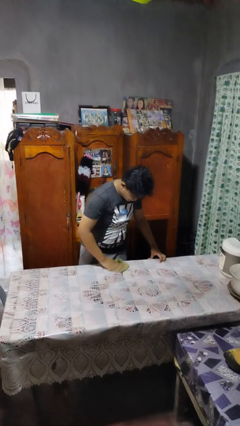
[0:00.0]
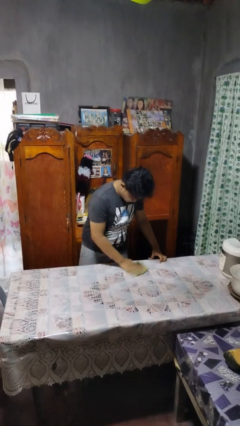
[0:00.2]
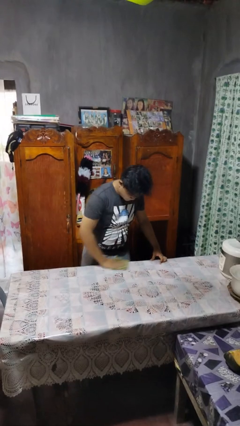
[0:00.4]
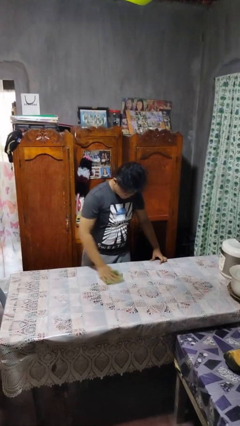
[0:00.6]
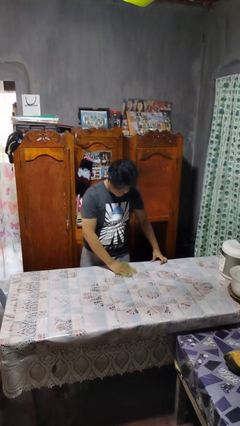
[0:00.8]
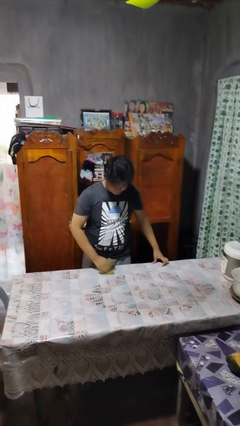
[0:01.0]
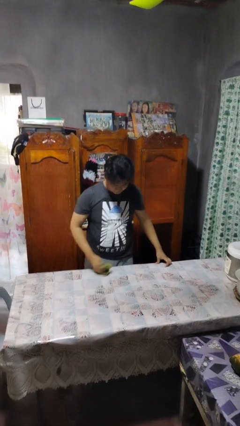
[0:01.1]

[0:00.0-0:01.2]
person cleans table with rag

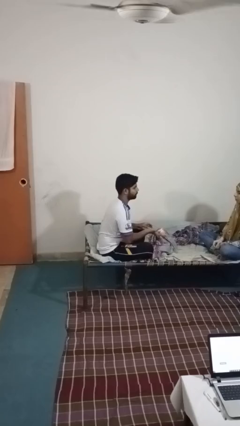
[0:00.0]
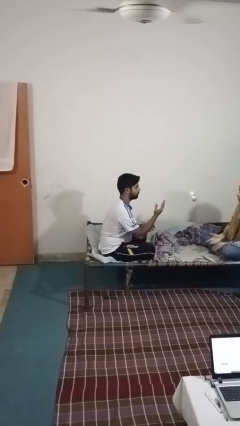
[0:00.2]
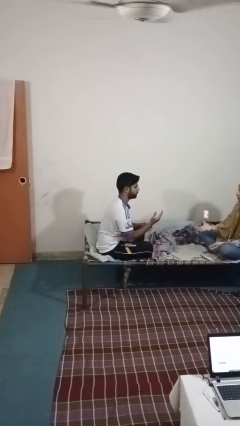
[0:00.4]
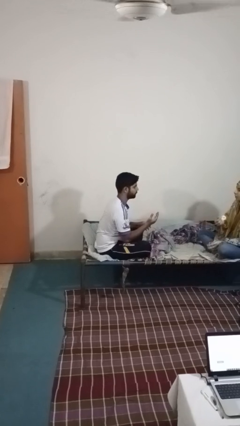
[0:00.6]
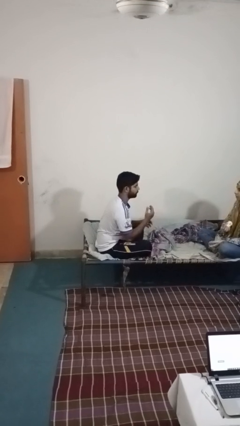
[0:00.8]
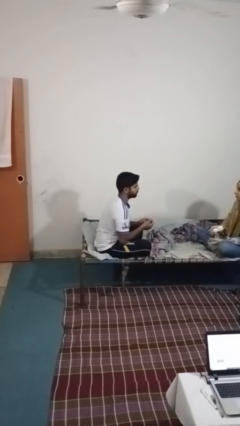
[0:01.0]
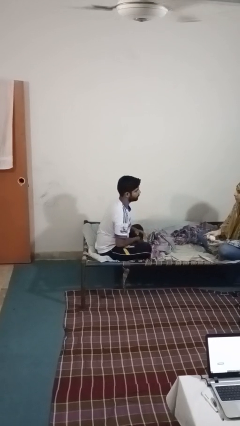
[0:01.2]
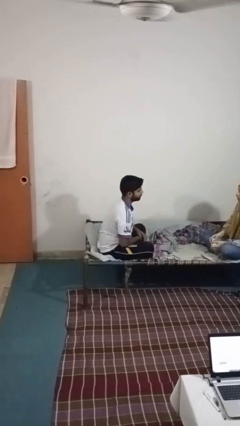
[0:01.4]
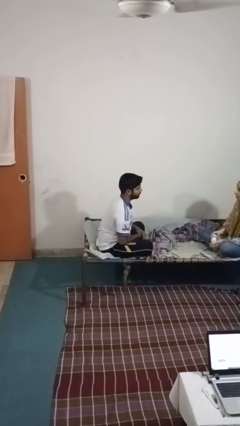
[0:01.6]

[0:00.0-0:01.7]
person throws object to person

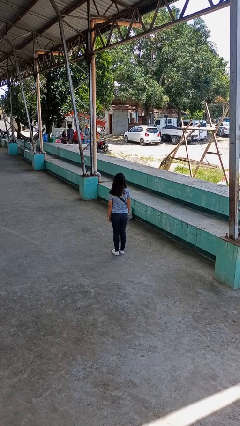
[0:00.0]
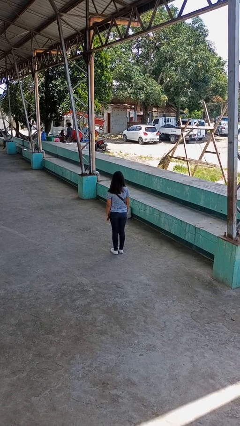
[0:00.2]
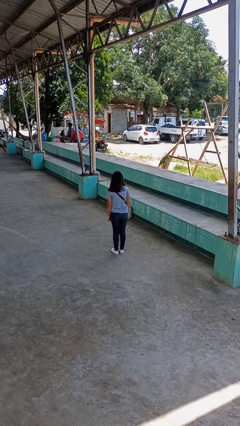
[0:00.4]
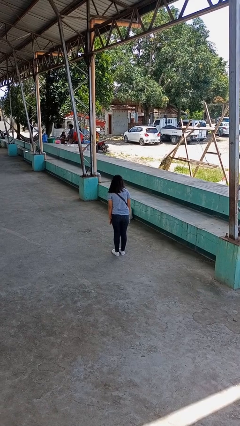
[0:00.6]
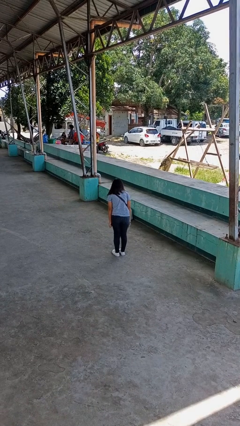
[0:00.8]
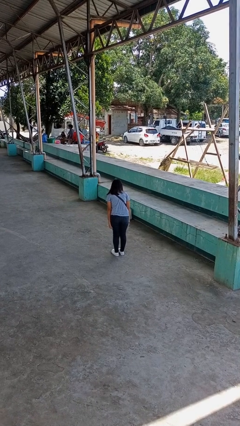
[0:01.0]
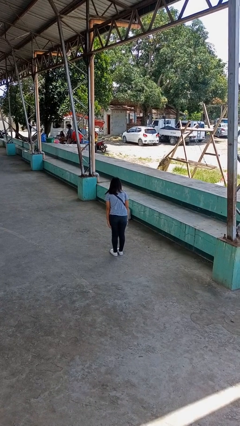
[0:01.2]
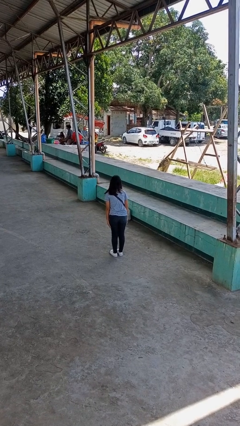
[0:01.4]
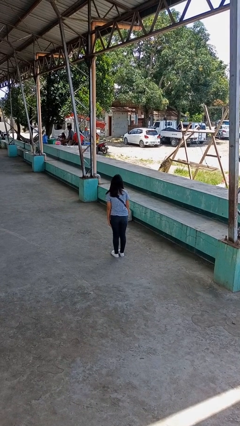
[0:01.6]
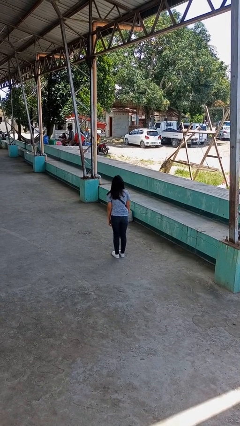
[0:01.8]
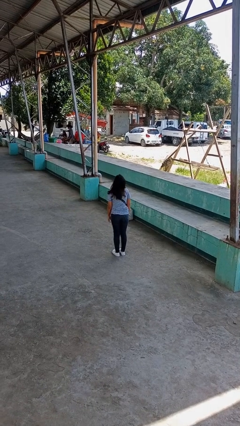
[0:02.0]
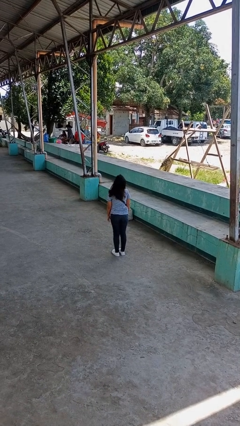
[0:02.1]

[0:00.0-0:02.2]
person bows

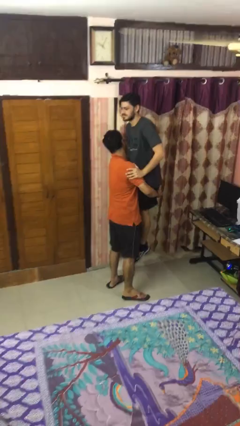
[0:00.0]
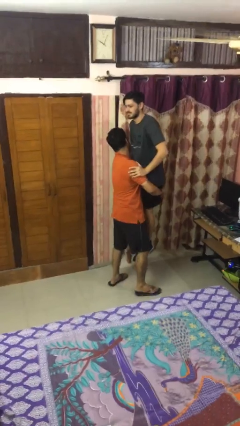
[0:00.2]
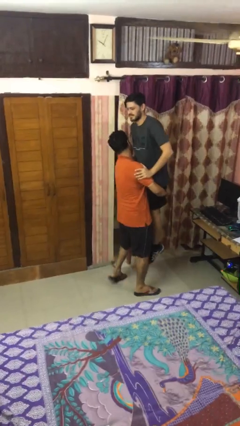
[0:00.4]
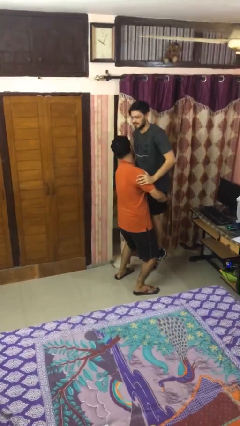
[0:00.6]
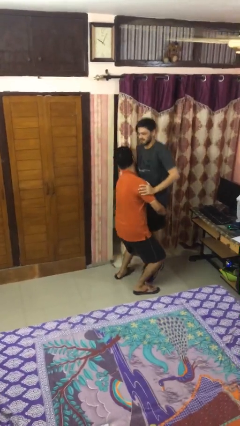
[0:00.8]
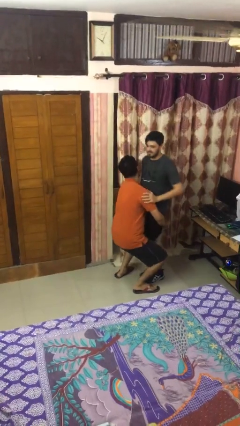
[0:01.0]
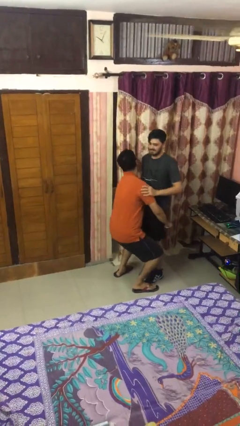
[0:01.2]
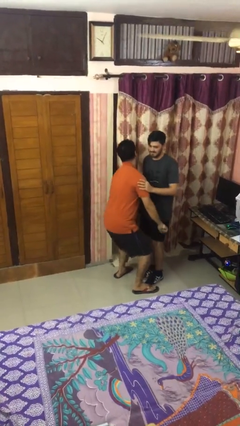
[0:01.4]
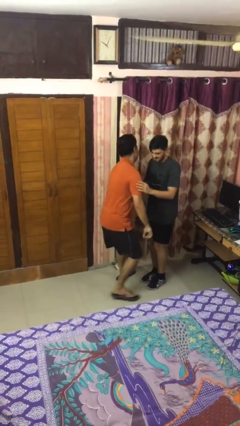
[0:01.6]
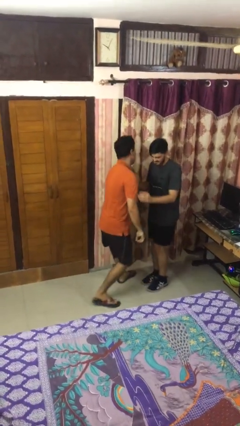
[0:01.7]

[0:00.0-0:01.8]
person puts down person

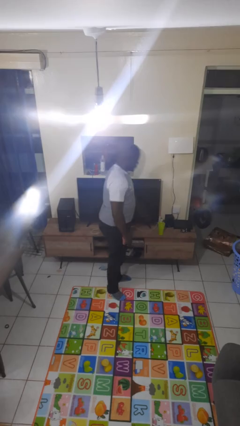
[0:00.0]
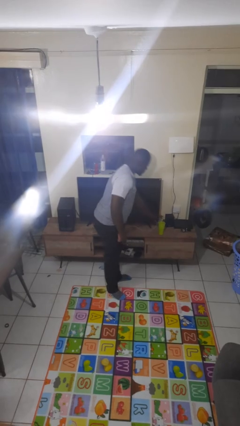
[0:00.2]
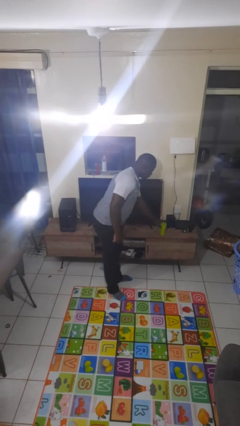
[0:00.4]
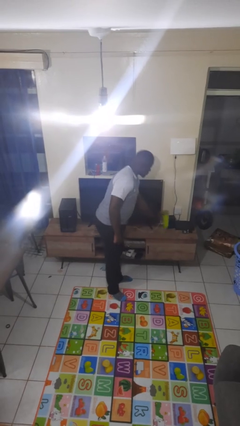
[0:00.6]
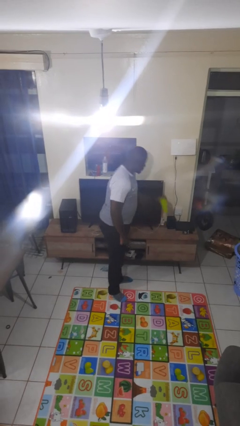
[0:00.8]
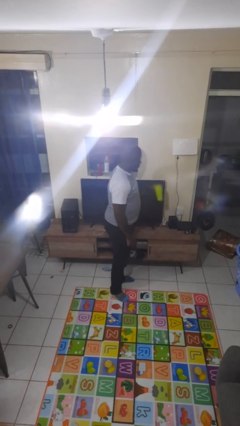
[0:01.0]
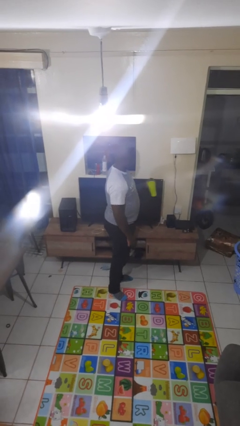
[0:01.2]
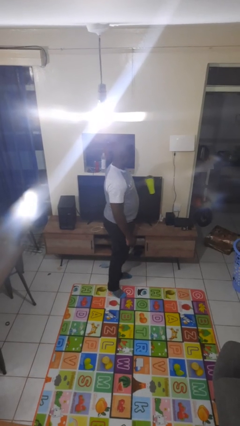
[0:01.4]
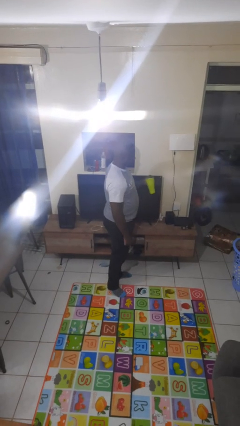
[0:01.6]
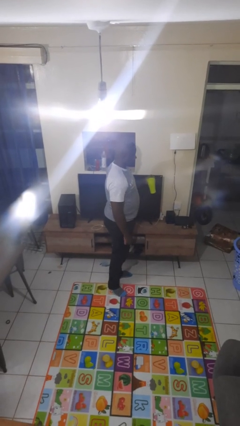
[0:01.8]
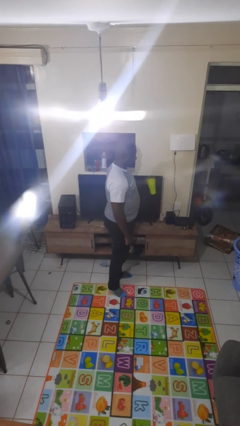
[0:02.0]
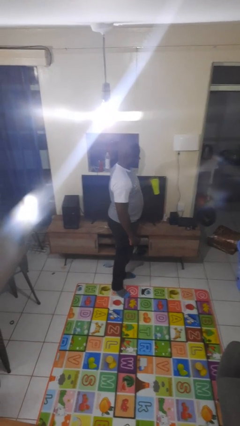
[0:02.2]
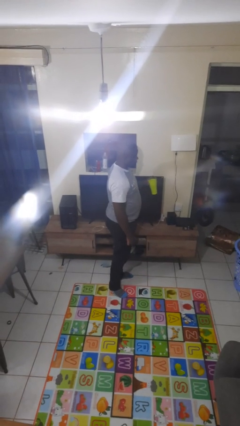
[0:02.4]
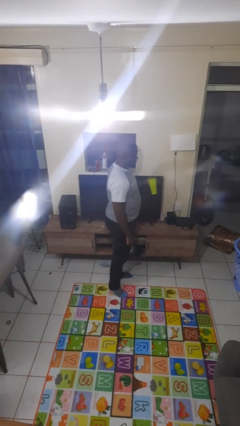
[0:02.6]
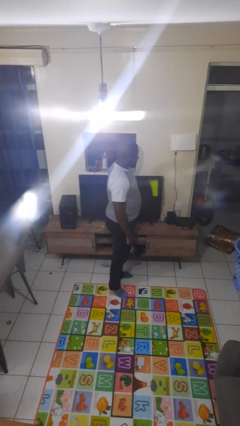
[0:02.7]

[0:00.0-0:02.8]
person picks up object from countertop

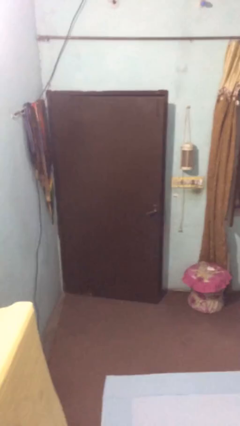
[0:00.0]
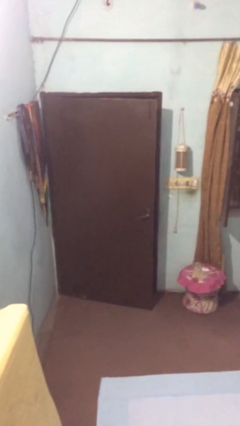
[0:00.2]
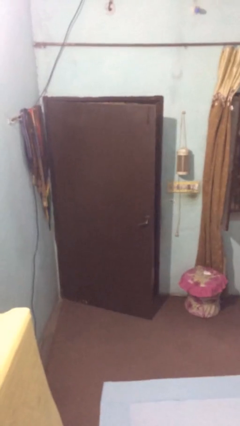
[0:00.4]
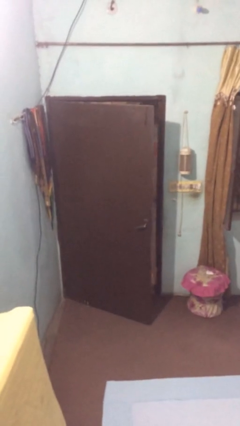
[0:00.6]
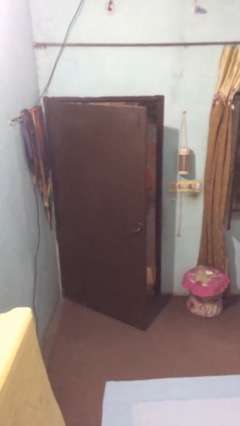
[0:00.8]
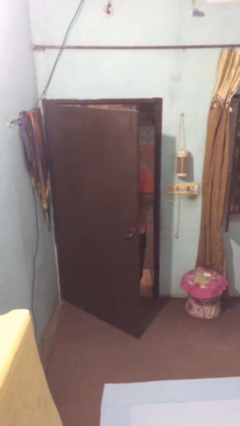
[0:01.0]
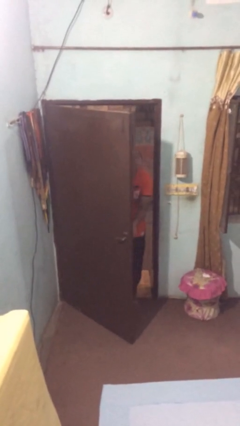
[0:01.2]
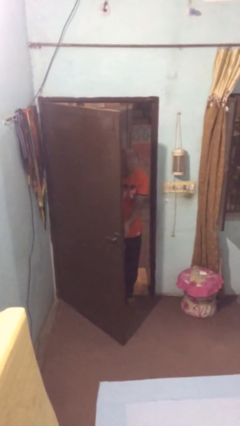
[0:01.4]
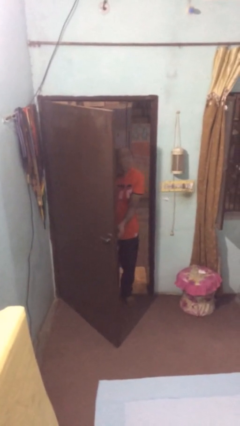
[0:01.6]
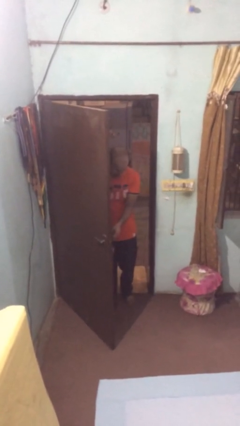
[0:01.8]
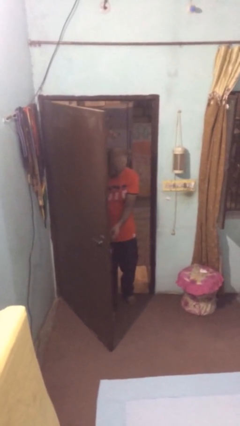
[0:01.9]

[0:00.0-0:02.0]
person opens facility door

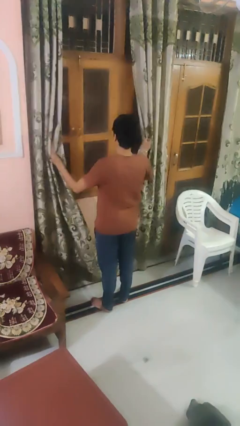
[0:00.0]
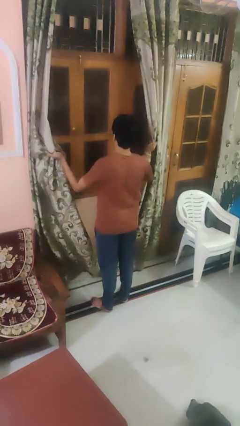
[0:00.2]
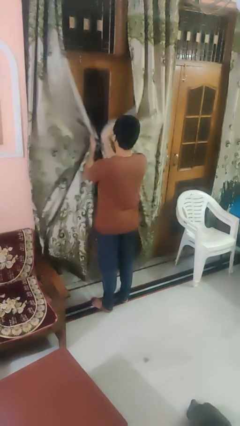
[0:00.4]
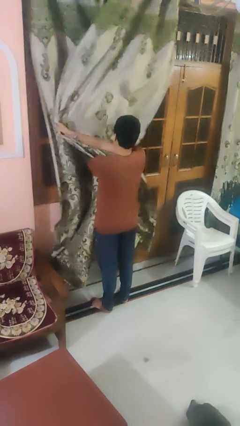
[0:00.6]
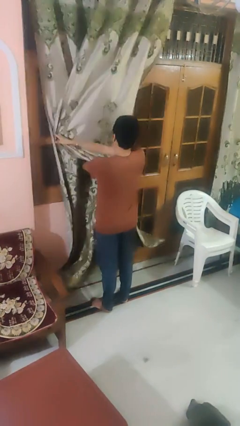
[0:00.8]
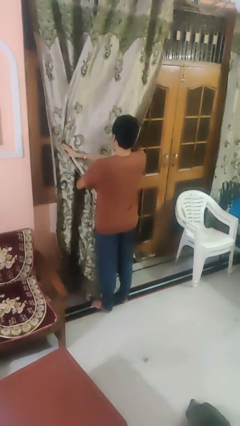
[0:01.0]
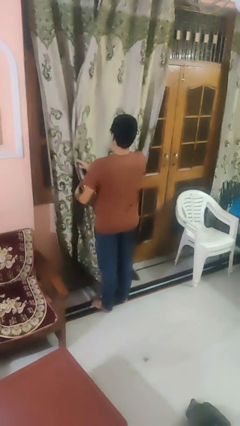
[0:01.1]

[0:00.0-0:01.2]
person closes curtains

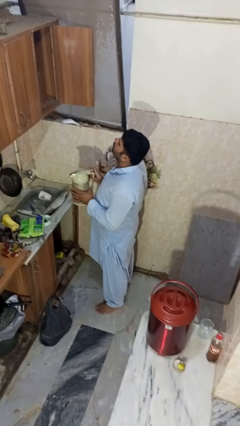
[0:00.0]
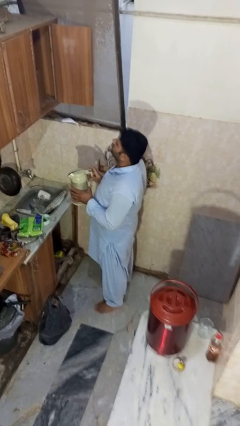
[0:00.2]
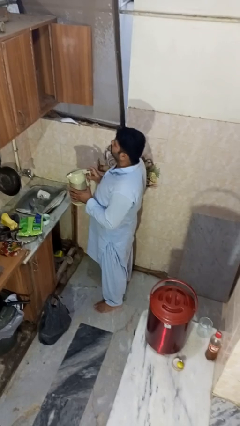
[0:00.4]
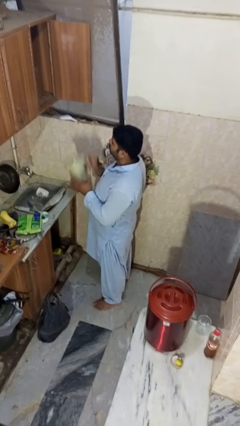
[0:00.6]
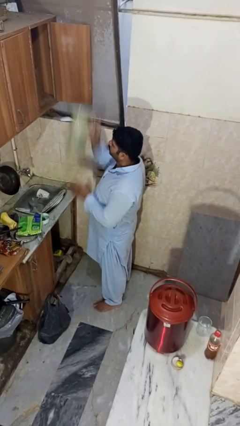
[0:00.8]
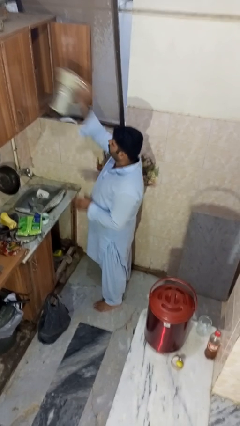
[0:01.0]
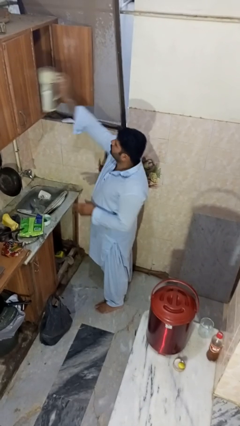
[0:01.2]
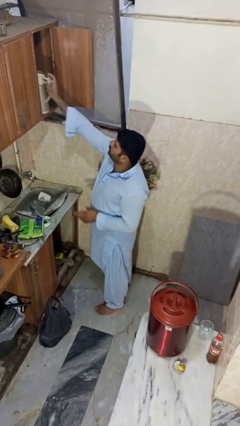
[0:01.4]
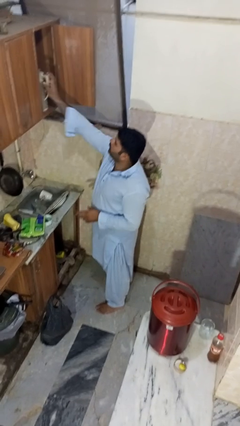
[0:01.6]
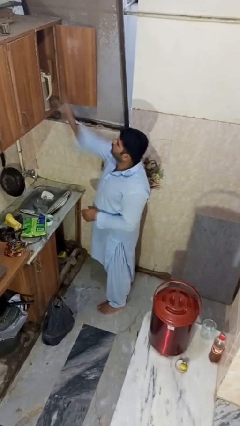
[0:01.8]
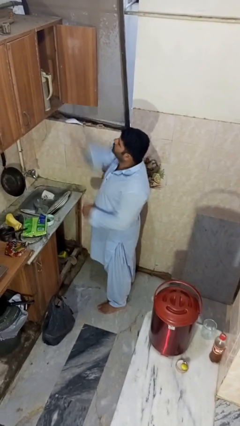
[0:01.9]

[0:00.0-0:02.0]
person puts object in cabinet

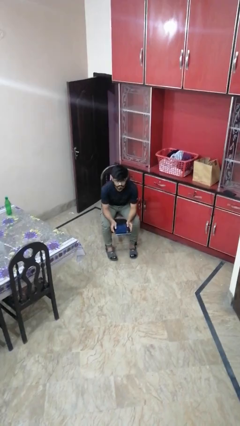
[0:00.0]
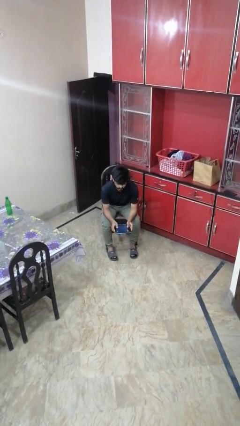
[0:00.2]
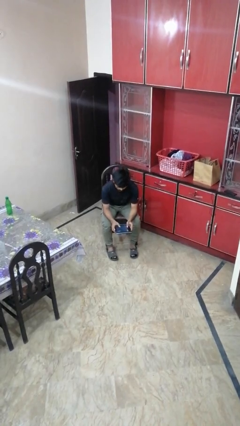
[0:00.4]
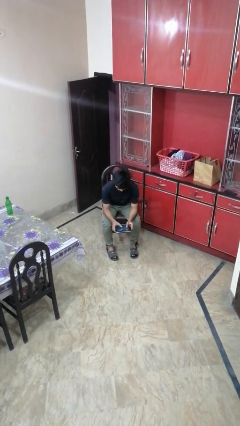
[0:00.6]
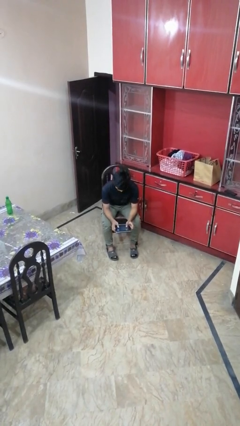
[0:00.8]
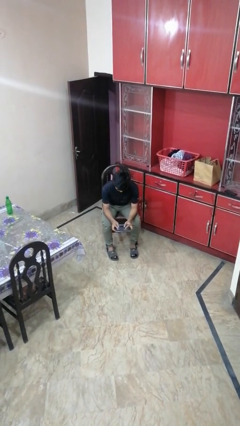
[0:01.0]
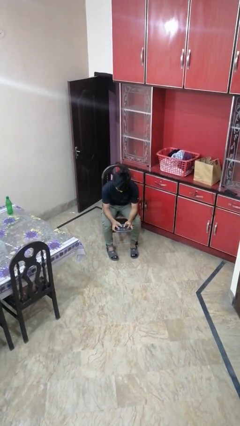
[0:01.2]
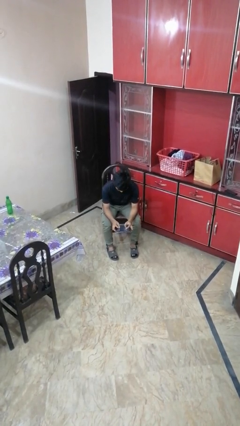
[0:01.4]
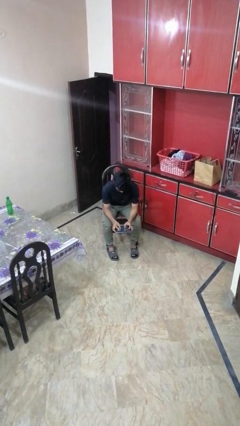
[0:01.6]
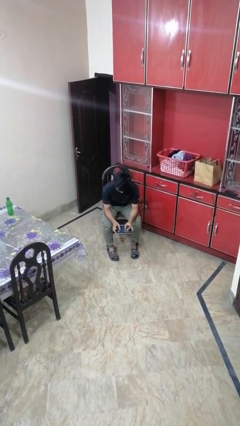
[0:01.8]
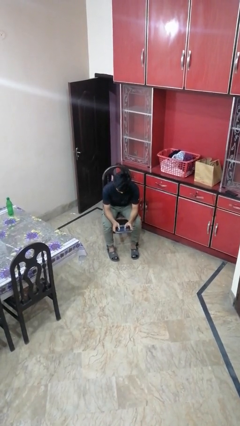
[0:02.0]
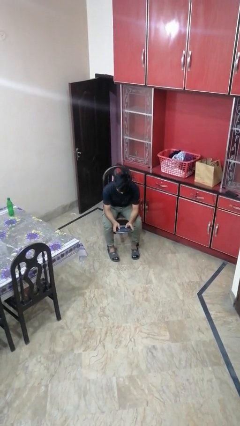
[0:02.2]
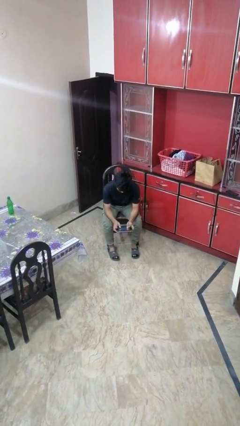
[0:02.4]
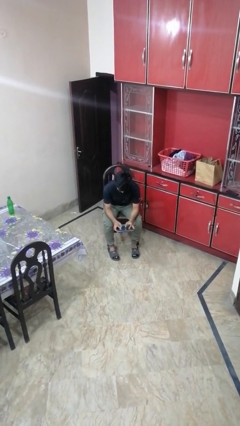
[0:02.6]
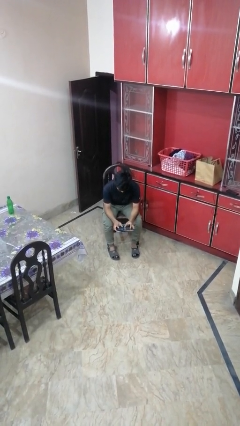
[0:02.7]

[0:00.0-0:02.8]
person interacts with tablet
